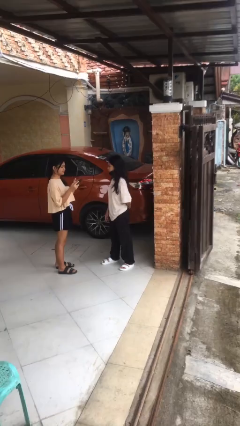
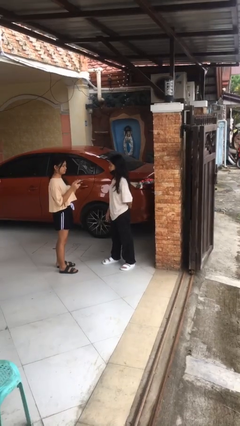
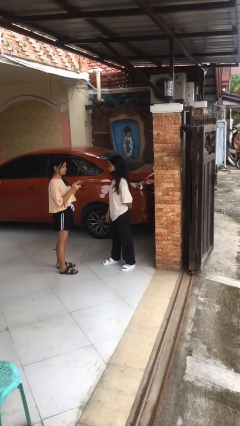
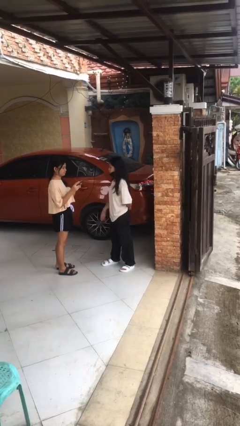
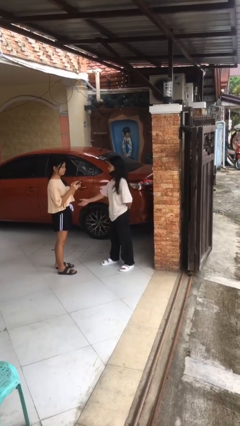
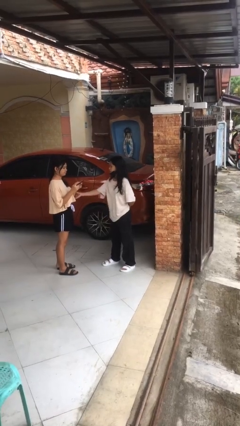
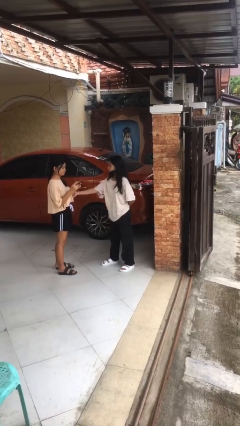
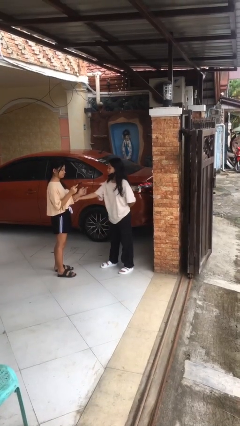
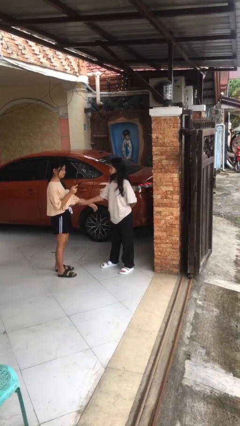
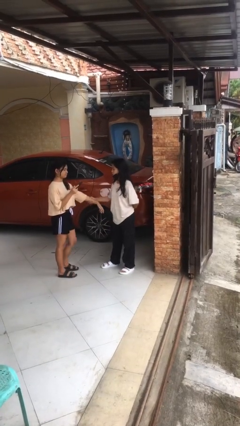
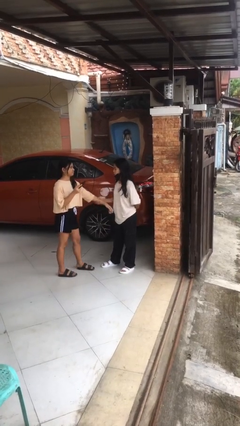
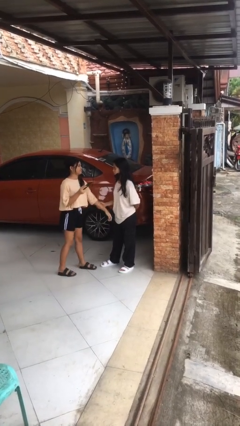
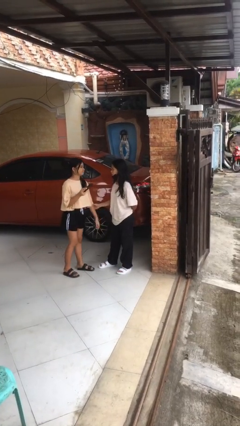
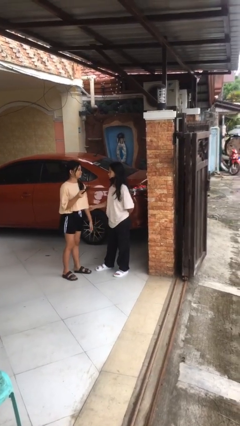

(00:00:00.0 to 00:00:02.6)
person grabs person by forearm

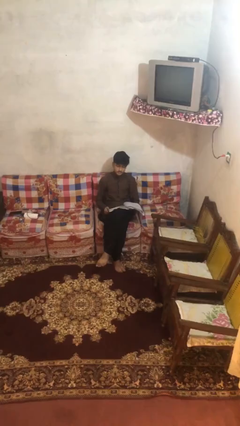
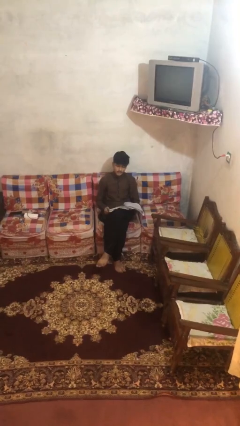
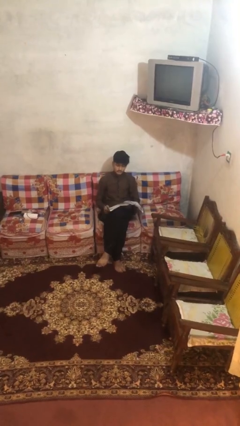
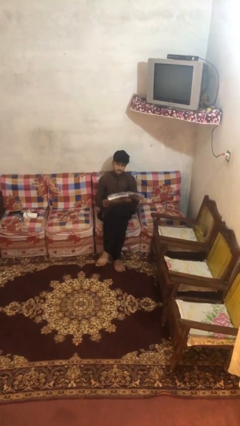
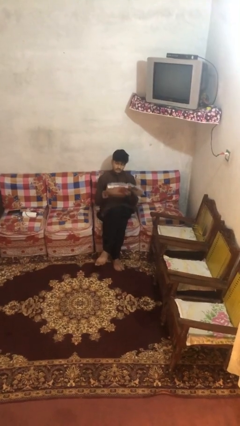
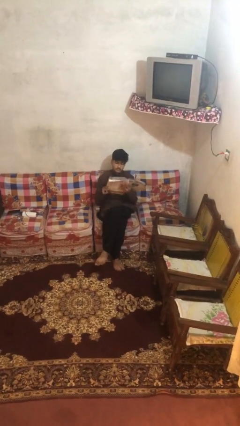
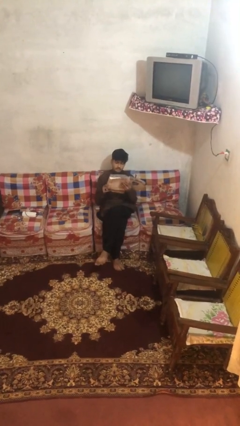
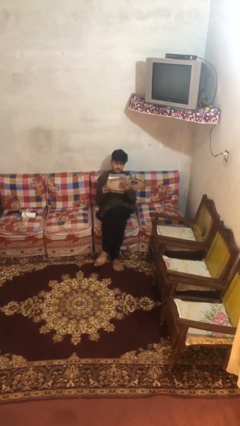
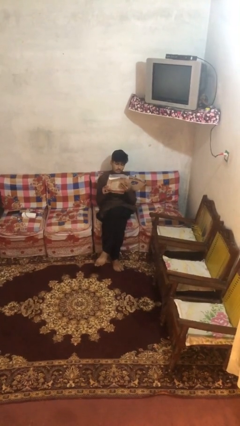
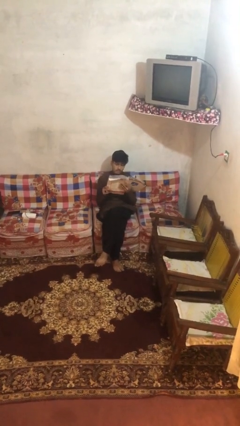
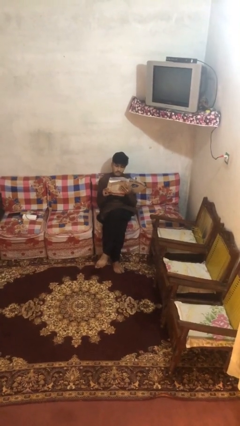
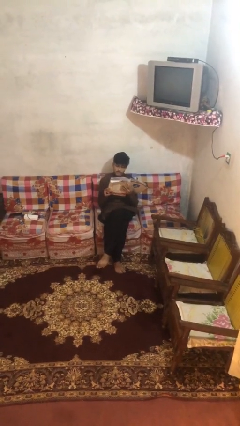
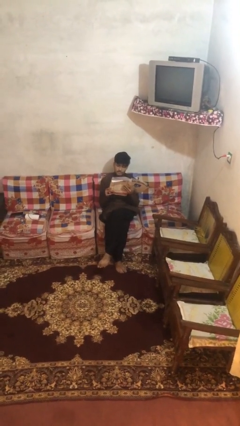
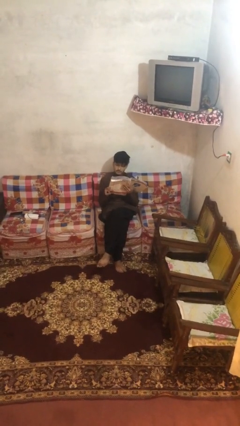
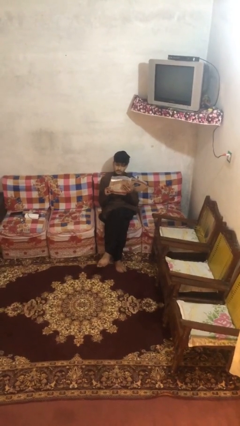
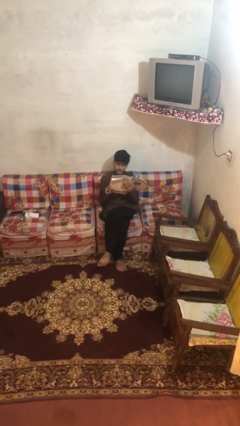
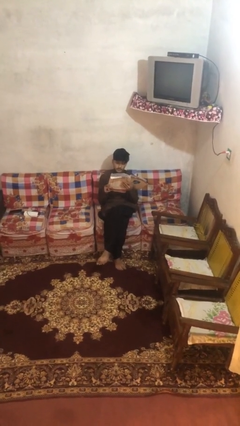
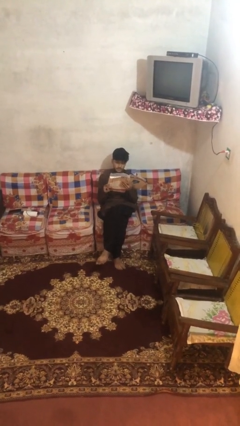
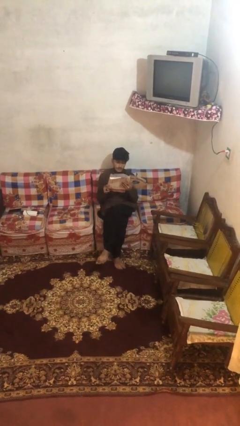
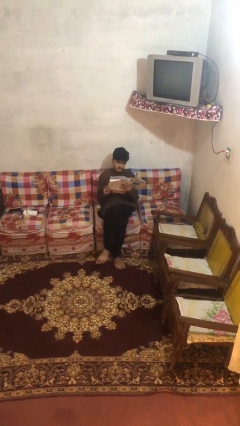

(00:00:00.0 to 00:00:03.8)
person reads document

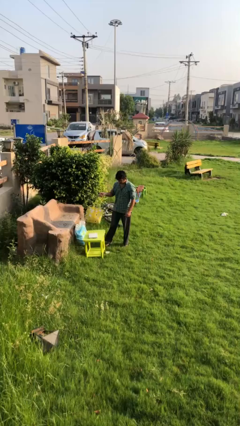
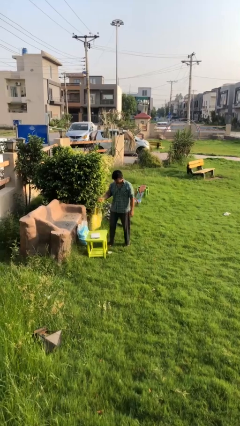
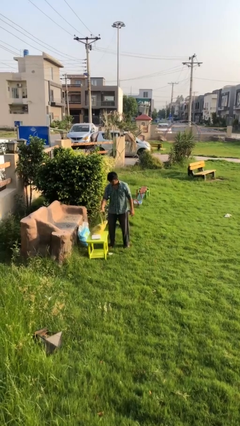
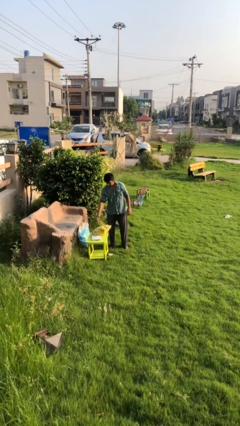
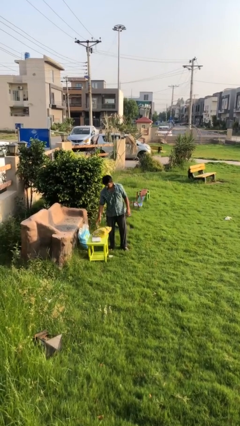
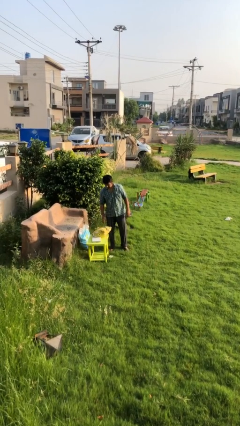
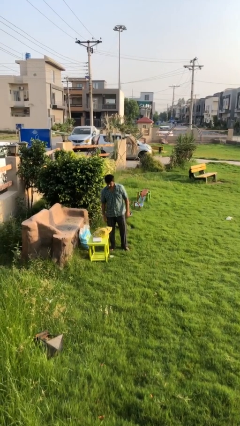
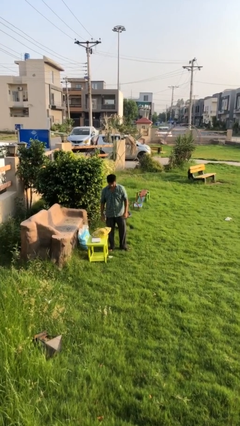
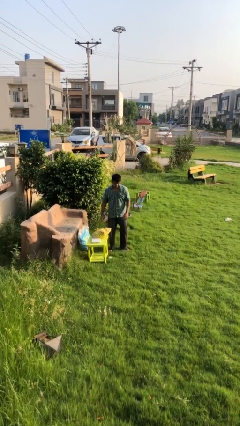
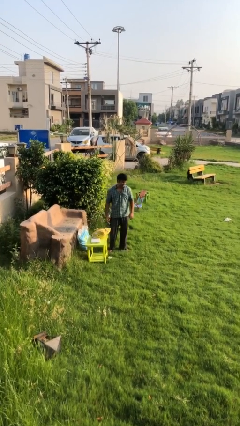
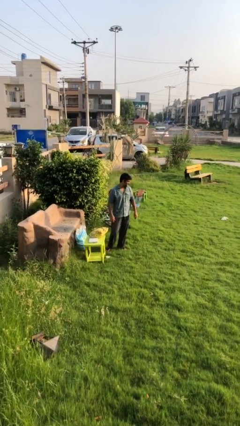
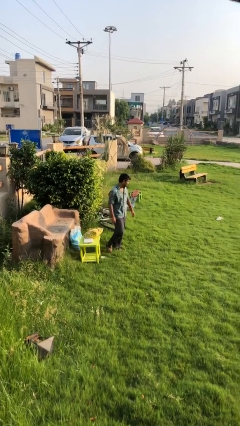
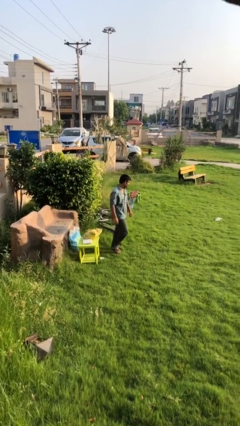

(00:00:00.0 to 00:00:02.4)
person puts down object on table

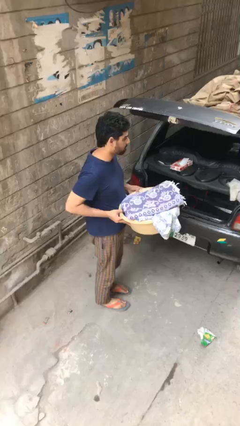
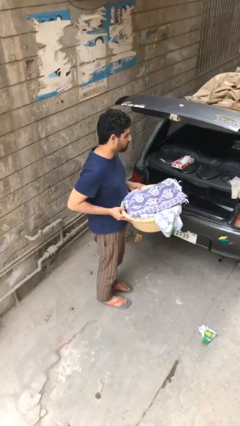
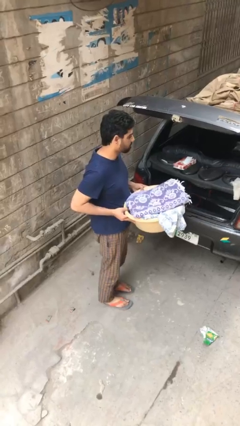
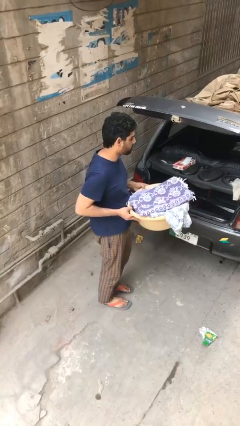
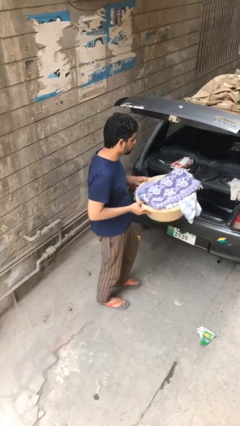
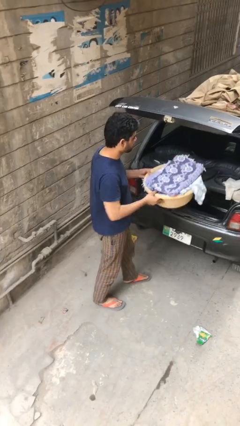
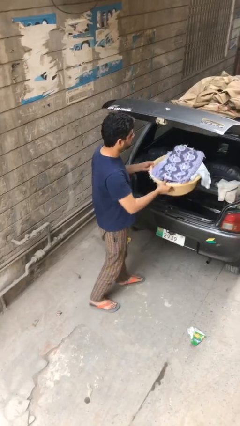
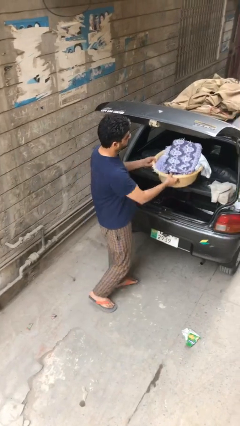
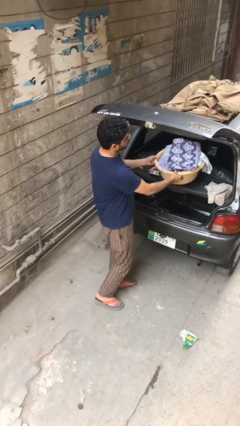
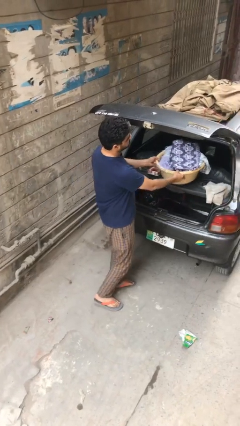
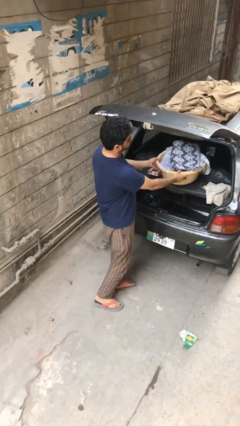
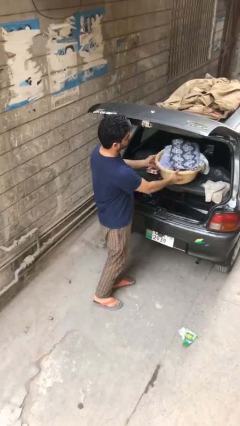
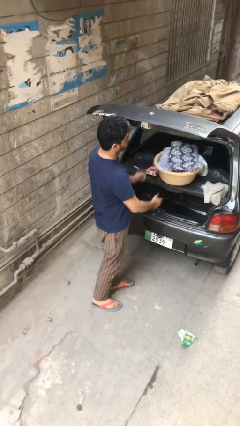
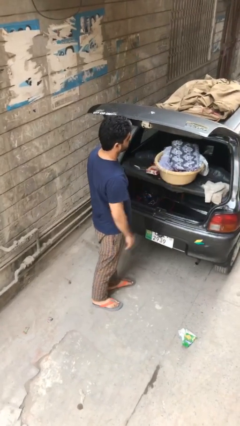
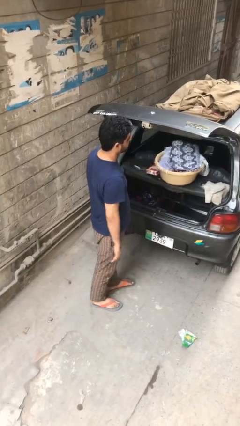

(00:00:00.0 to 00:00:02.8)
person loads car

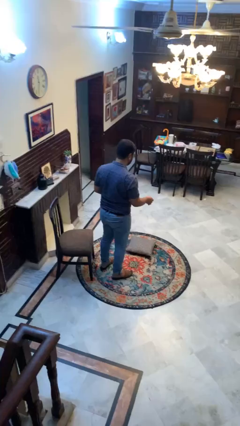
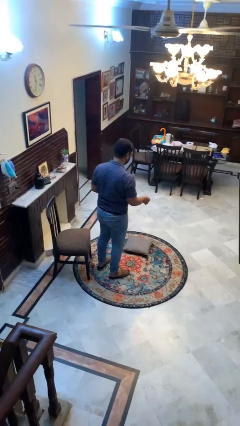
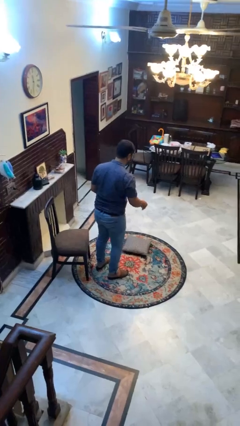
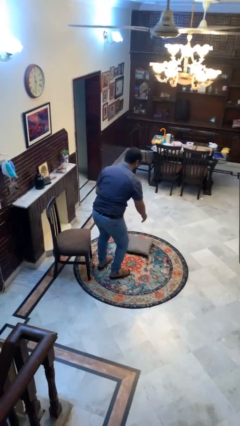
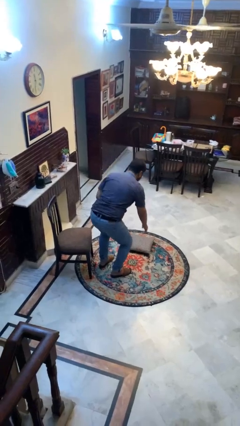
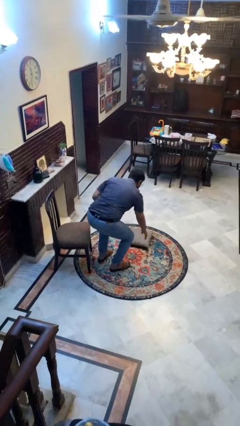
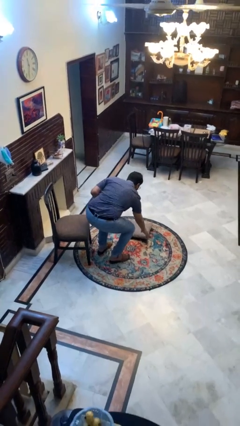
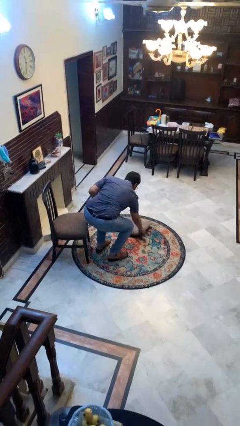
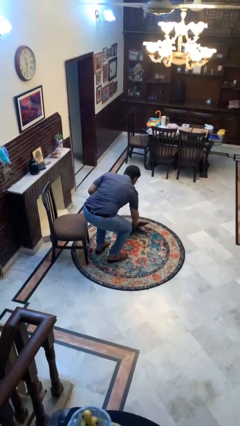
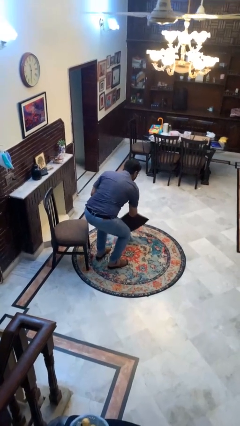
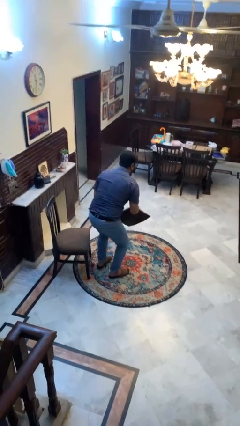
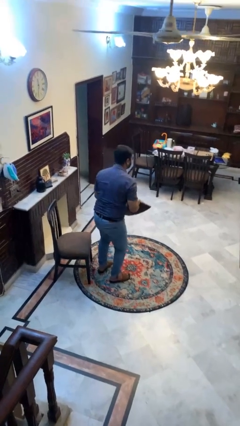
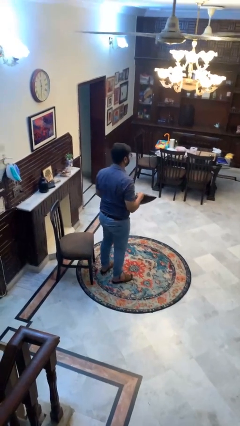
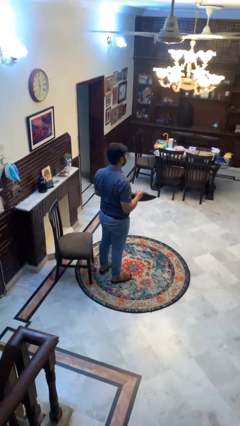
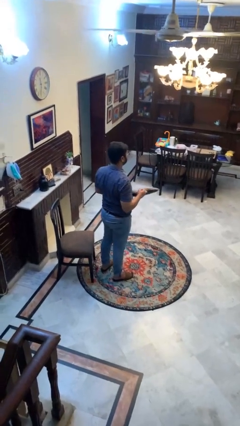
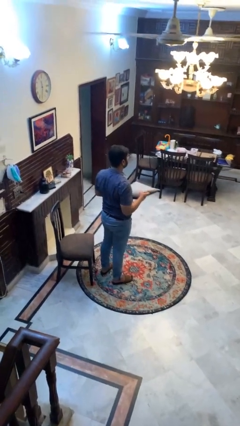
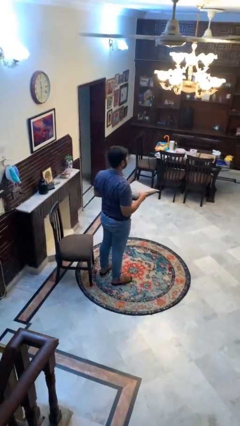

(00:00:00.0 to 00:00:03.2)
person picks up object from floor

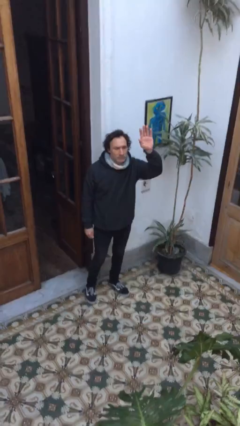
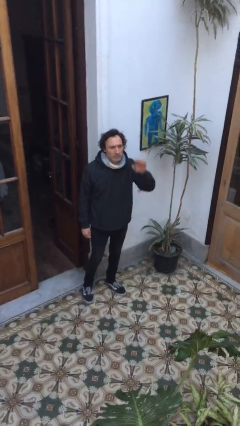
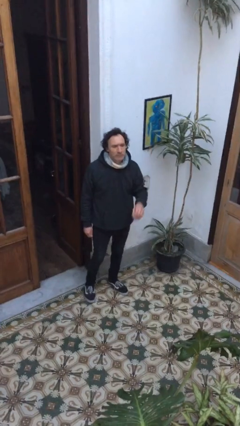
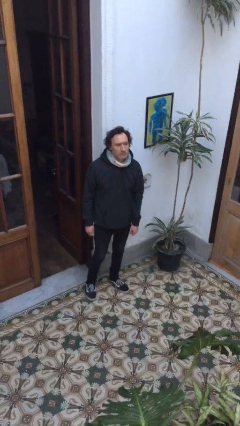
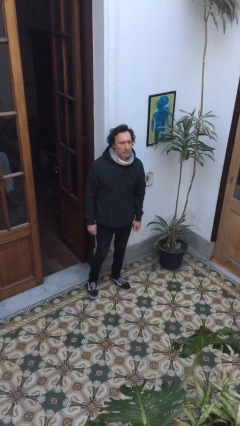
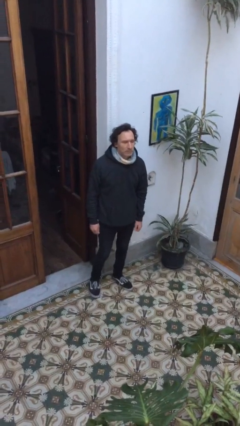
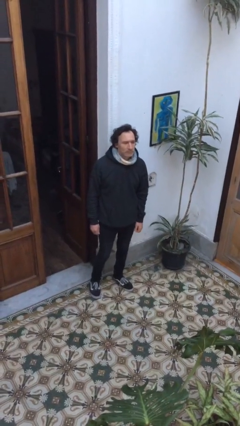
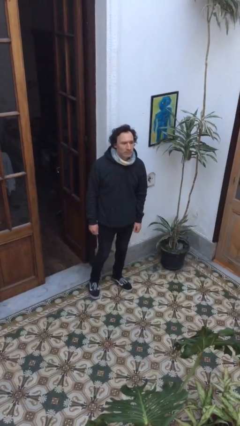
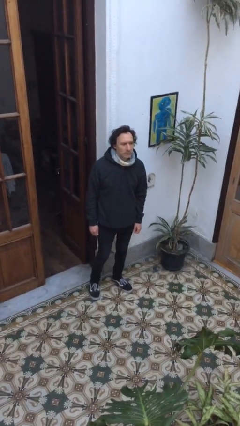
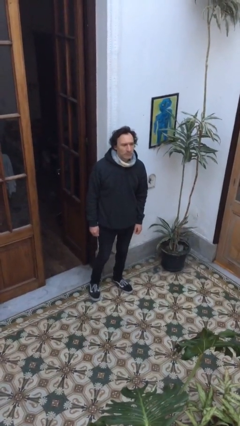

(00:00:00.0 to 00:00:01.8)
person gestures lower hand

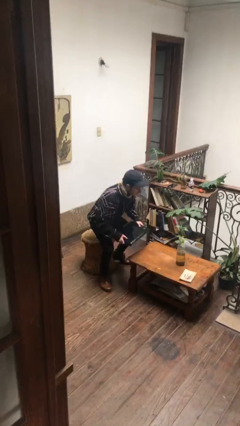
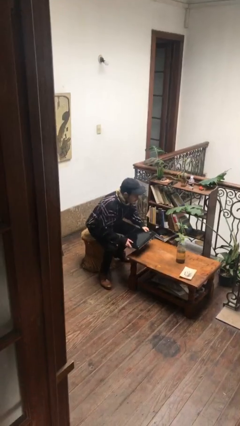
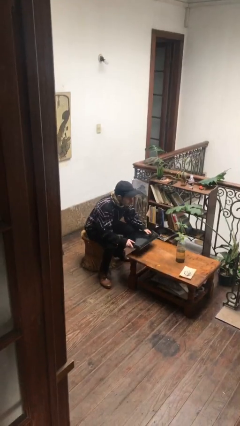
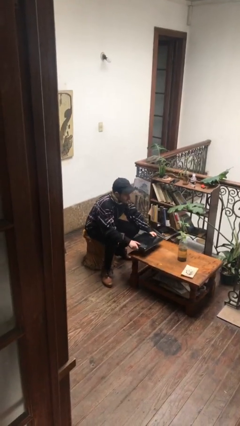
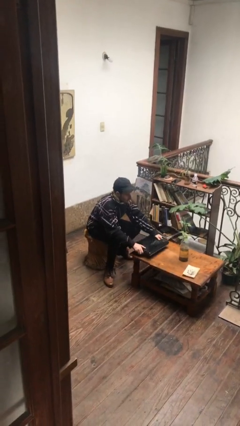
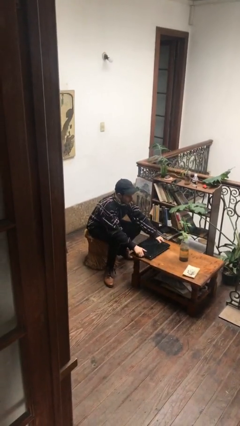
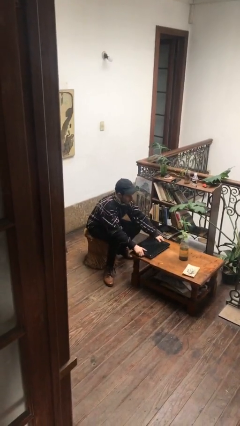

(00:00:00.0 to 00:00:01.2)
person sits down
